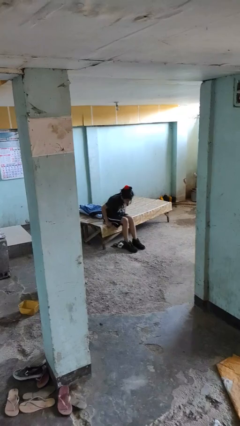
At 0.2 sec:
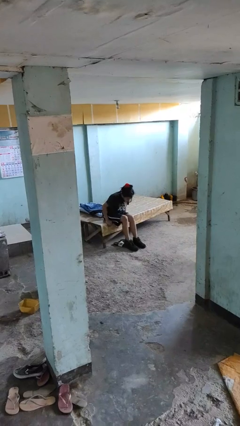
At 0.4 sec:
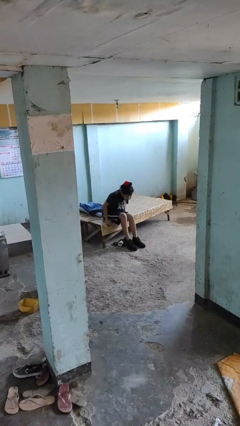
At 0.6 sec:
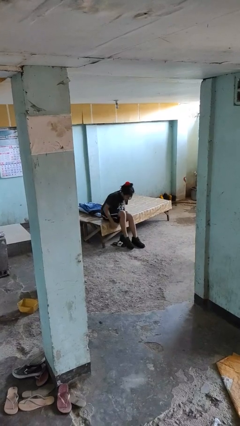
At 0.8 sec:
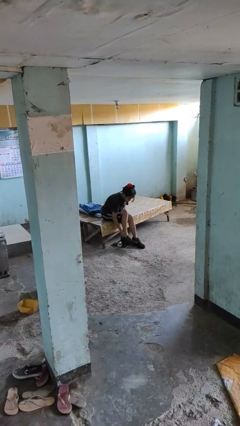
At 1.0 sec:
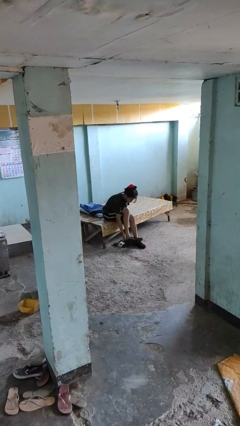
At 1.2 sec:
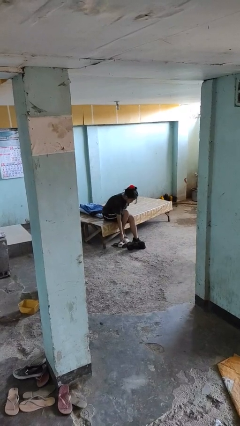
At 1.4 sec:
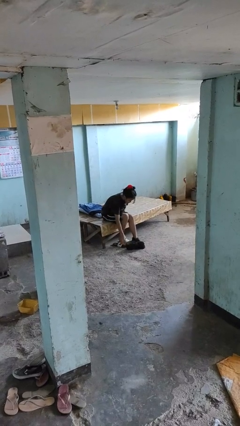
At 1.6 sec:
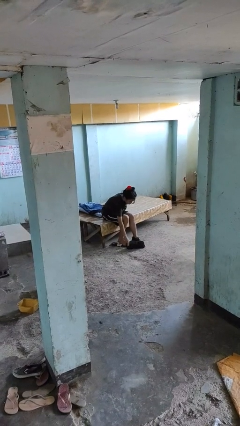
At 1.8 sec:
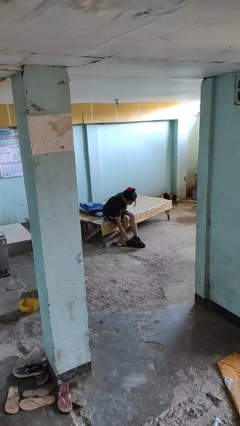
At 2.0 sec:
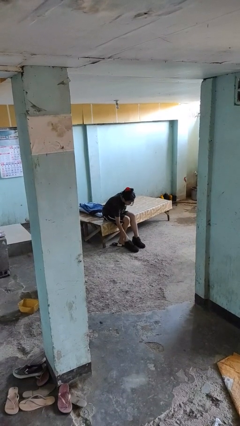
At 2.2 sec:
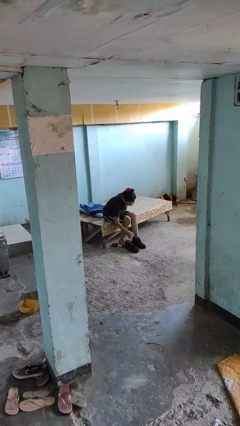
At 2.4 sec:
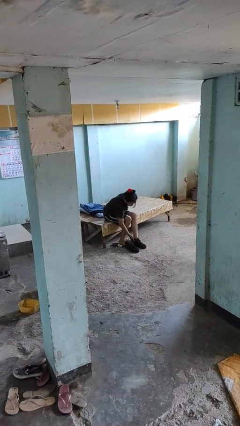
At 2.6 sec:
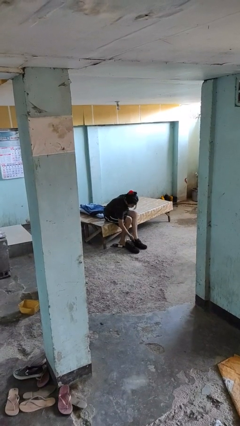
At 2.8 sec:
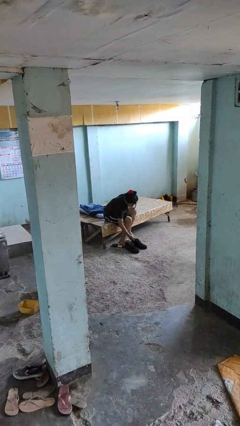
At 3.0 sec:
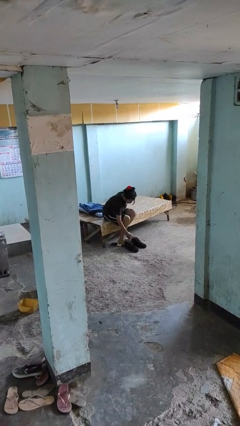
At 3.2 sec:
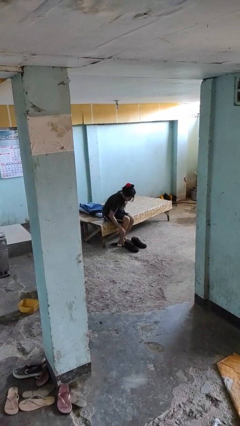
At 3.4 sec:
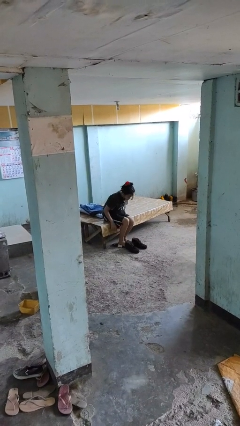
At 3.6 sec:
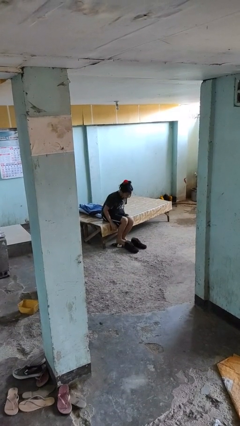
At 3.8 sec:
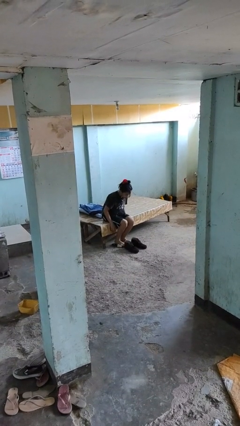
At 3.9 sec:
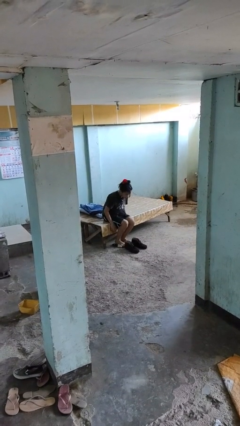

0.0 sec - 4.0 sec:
person takes off boots

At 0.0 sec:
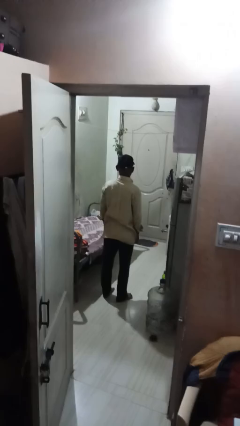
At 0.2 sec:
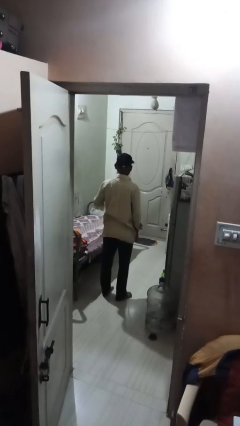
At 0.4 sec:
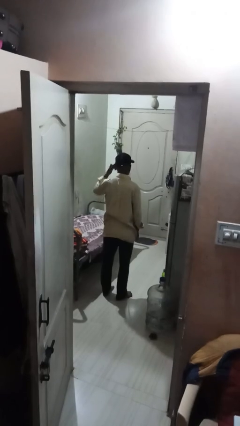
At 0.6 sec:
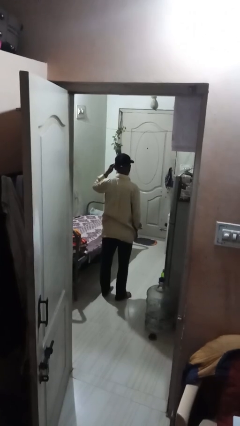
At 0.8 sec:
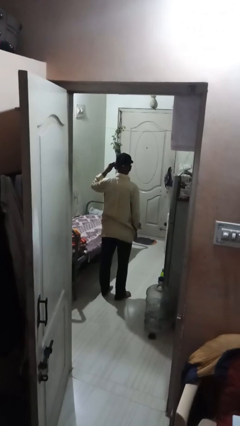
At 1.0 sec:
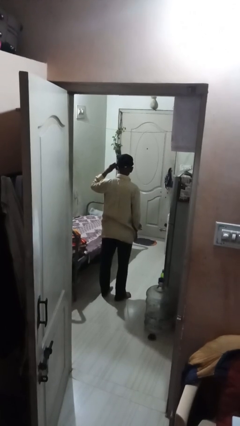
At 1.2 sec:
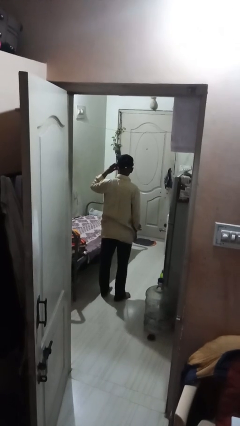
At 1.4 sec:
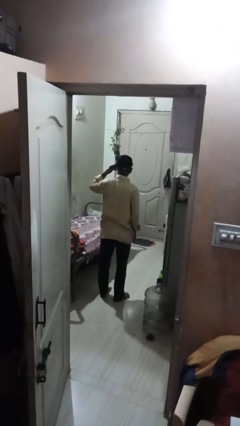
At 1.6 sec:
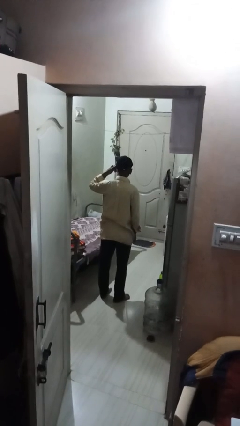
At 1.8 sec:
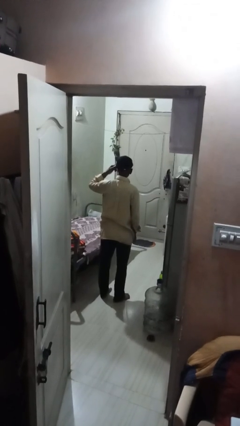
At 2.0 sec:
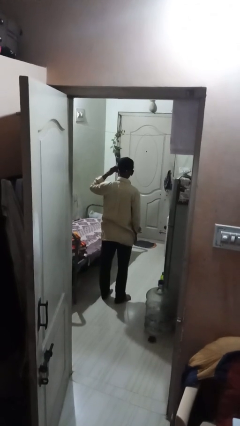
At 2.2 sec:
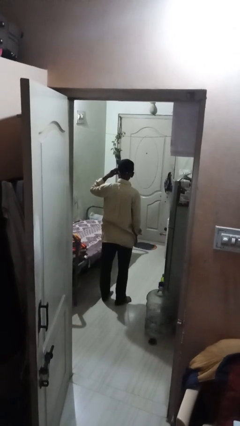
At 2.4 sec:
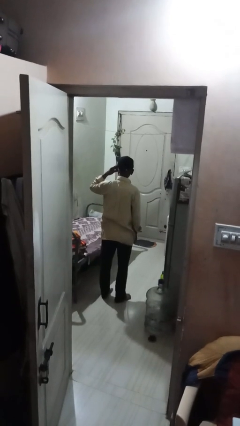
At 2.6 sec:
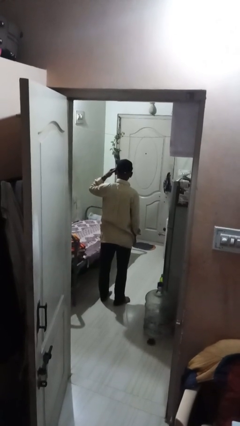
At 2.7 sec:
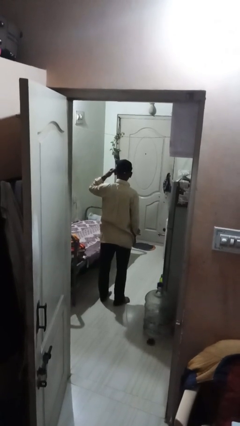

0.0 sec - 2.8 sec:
person touches earlobe

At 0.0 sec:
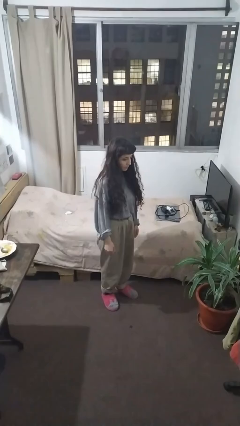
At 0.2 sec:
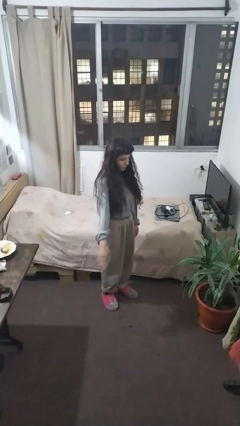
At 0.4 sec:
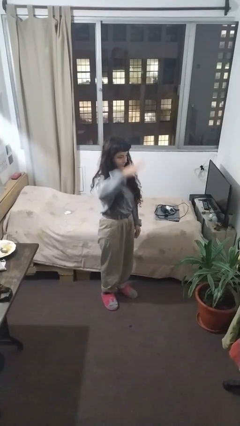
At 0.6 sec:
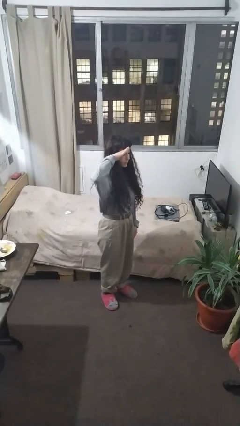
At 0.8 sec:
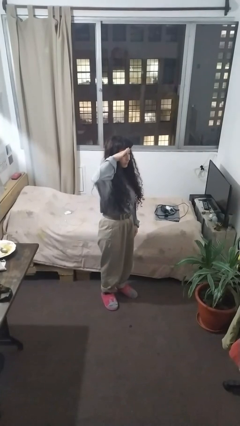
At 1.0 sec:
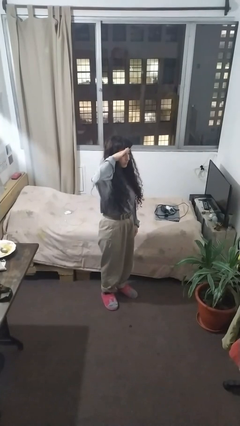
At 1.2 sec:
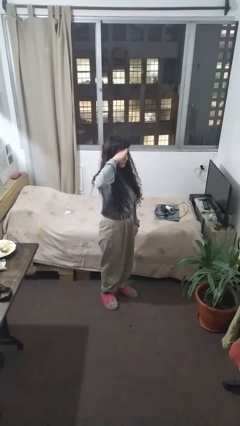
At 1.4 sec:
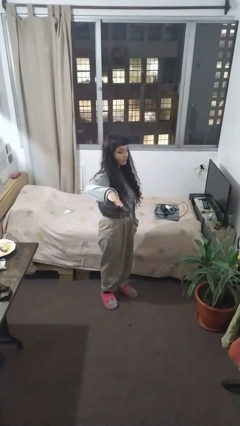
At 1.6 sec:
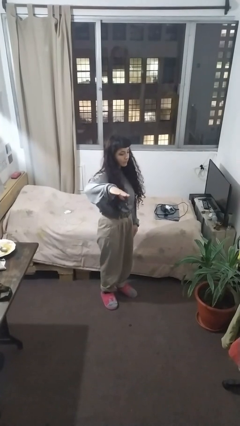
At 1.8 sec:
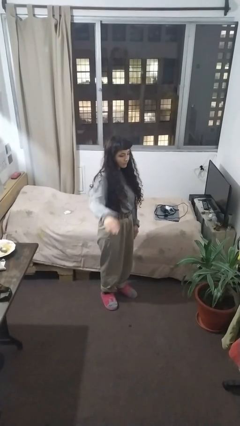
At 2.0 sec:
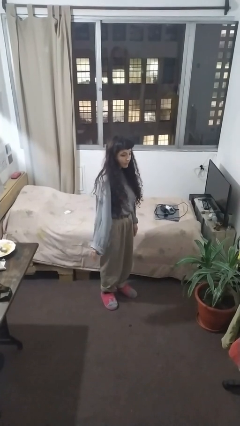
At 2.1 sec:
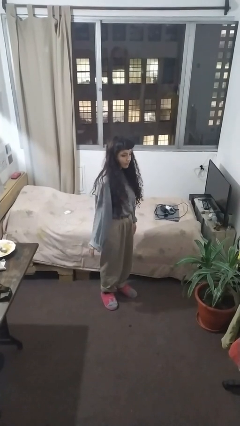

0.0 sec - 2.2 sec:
person salutes

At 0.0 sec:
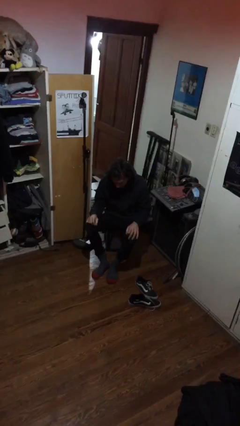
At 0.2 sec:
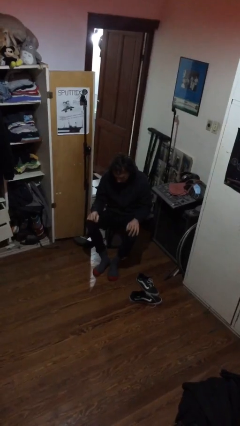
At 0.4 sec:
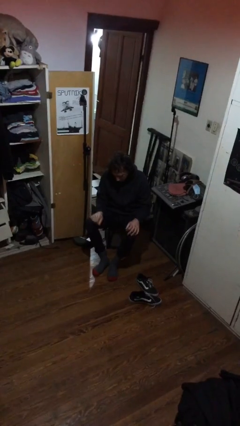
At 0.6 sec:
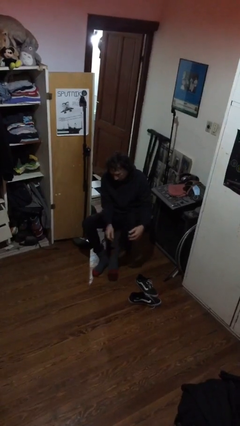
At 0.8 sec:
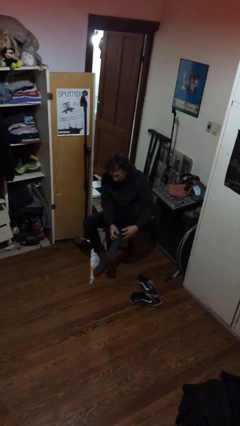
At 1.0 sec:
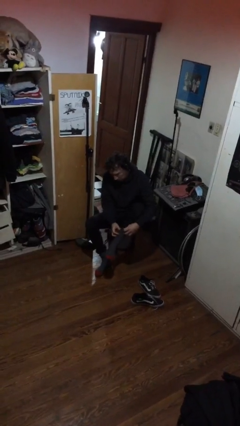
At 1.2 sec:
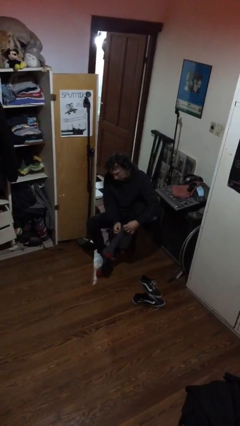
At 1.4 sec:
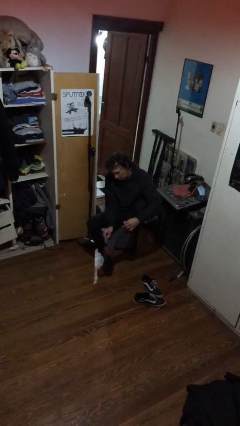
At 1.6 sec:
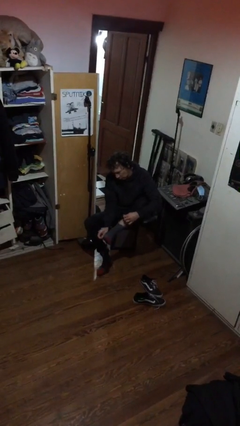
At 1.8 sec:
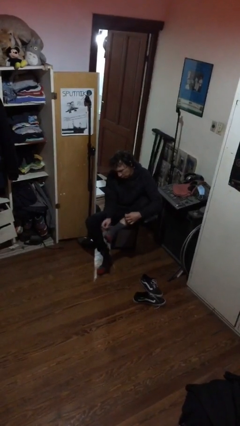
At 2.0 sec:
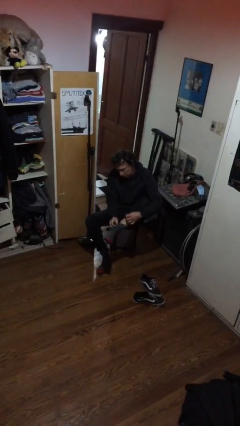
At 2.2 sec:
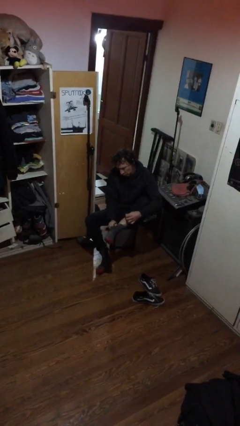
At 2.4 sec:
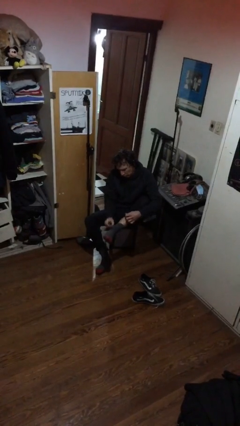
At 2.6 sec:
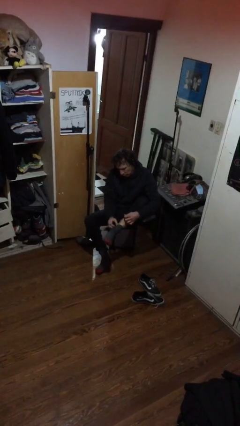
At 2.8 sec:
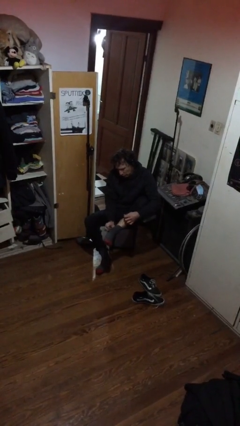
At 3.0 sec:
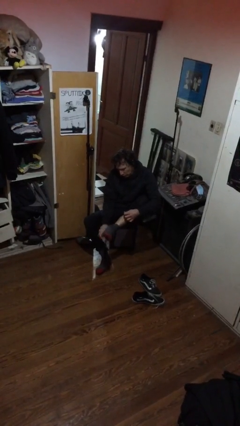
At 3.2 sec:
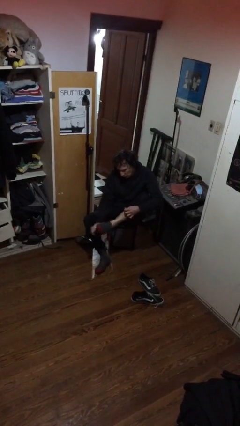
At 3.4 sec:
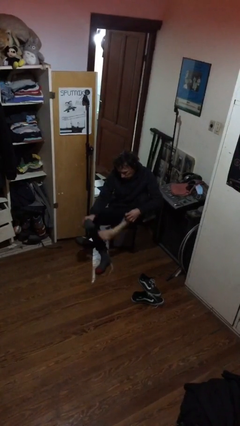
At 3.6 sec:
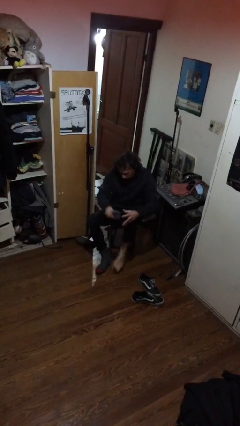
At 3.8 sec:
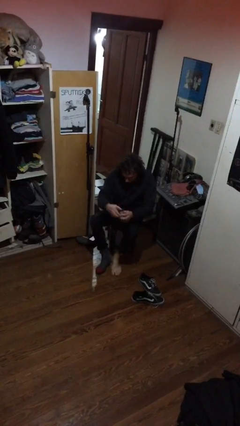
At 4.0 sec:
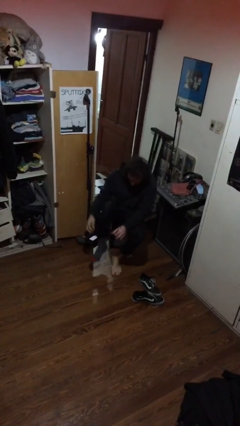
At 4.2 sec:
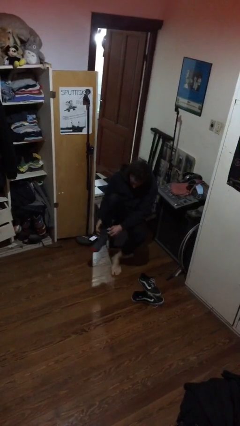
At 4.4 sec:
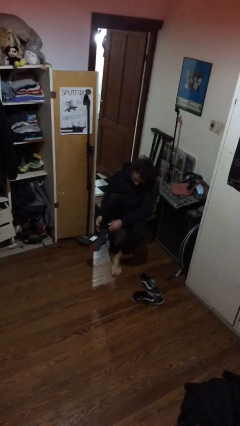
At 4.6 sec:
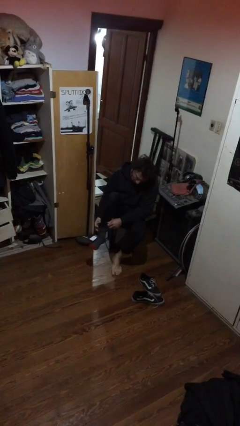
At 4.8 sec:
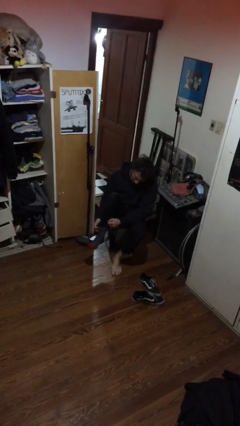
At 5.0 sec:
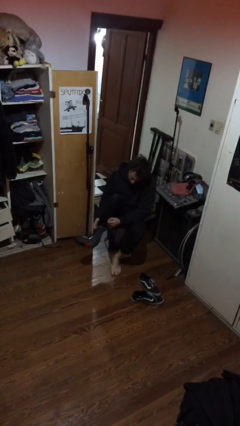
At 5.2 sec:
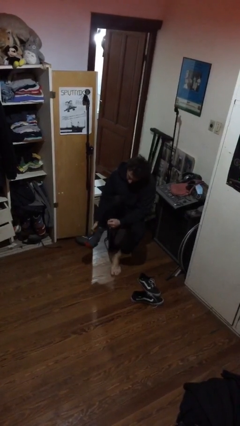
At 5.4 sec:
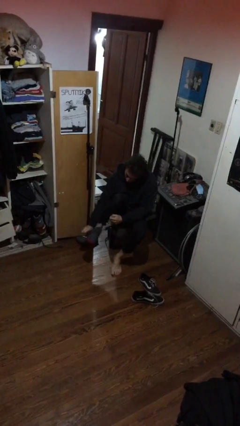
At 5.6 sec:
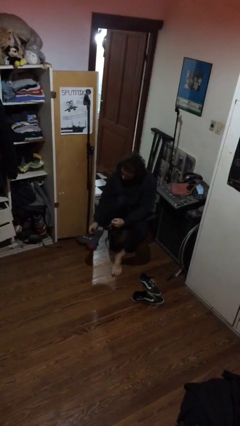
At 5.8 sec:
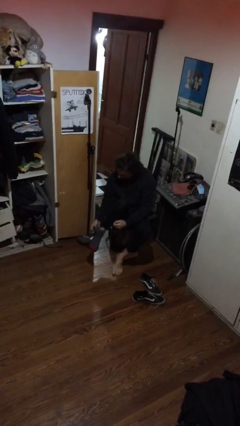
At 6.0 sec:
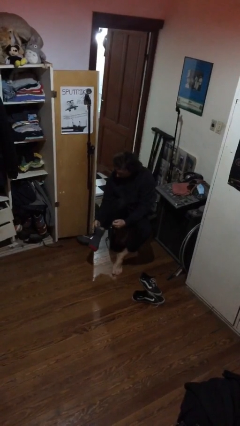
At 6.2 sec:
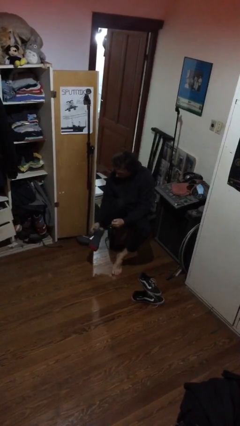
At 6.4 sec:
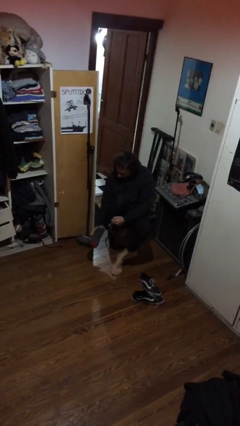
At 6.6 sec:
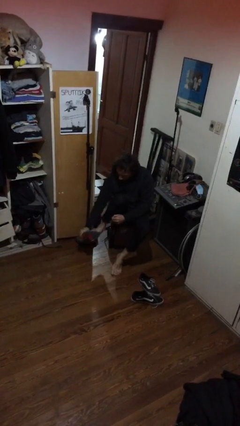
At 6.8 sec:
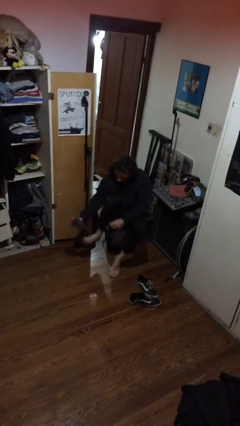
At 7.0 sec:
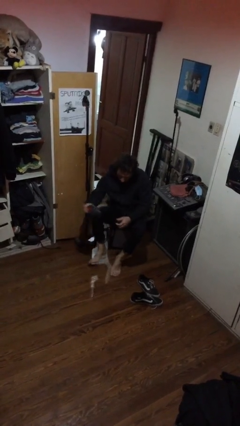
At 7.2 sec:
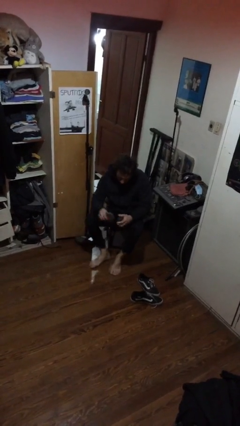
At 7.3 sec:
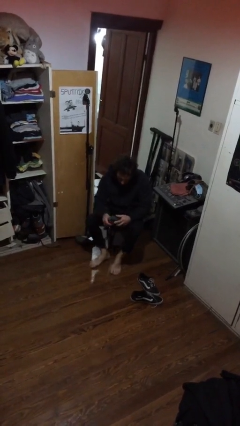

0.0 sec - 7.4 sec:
person takes off socks

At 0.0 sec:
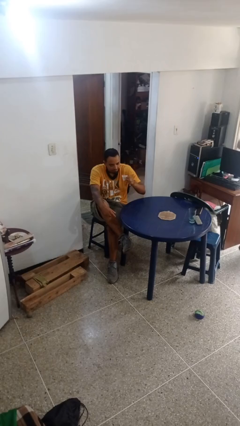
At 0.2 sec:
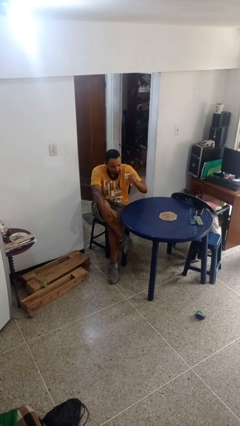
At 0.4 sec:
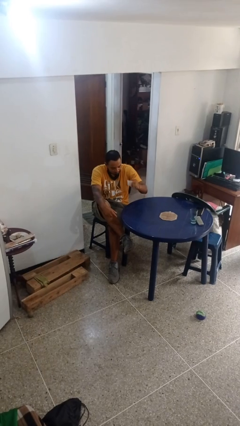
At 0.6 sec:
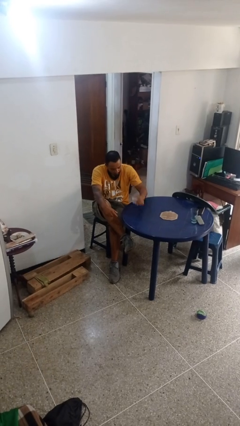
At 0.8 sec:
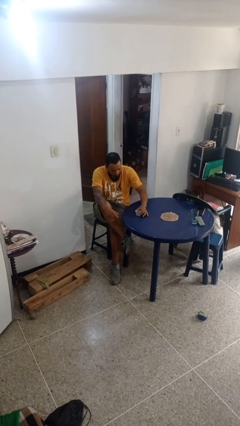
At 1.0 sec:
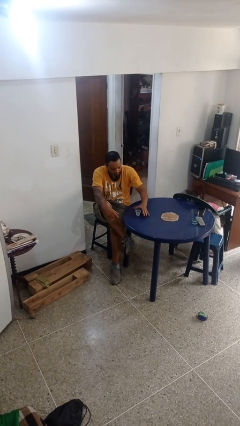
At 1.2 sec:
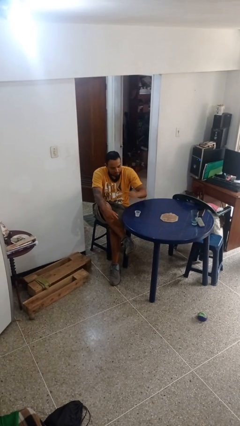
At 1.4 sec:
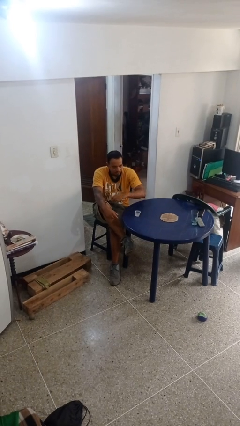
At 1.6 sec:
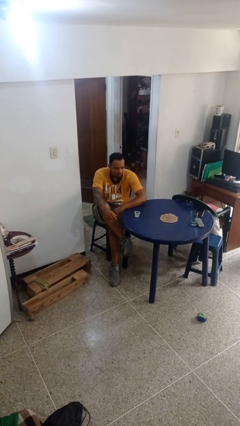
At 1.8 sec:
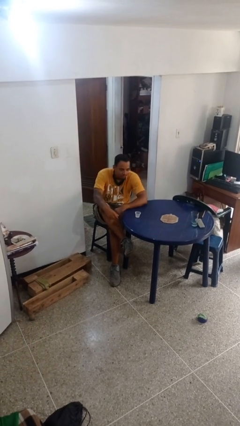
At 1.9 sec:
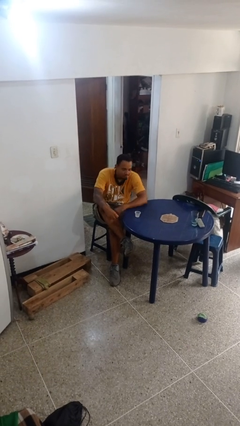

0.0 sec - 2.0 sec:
person puts down object on table
